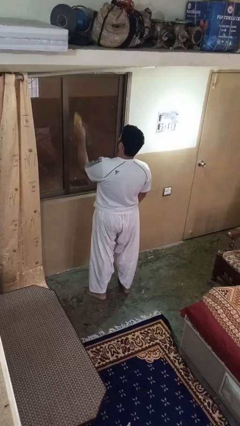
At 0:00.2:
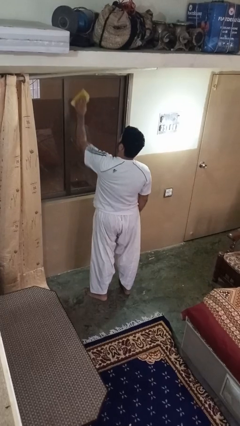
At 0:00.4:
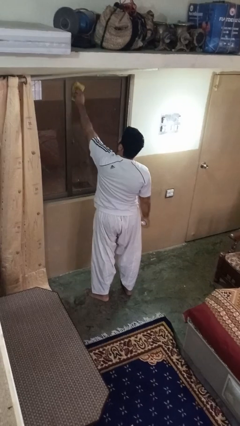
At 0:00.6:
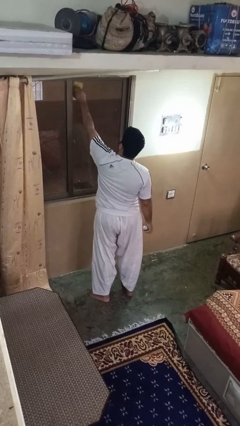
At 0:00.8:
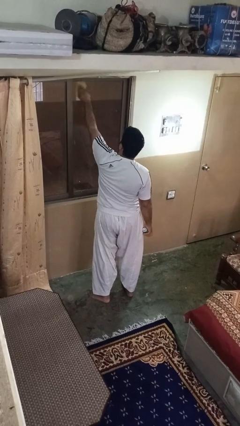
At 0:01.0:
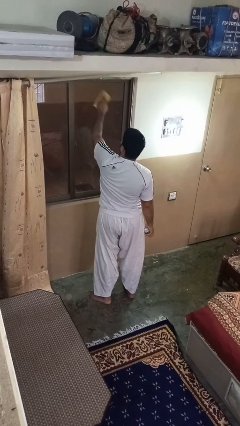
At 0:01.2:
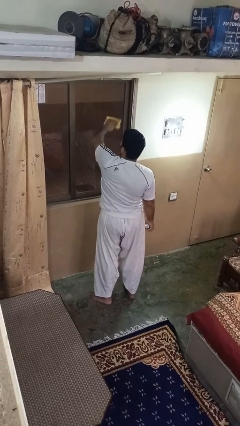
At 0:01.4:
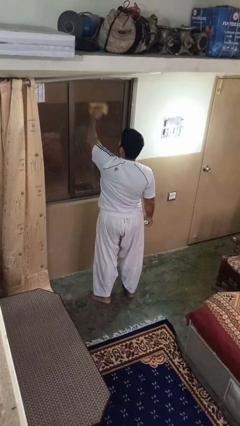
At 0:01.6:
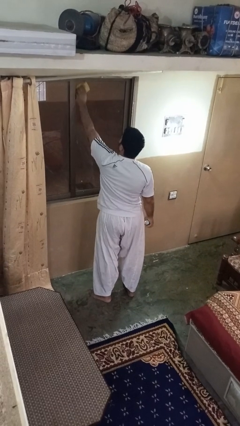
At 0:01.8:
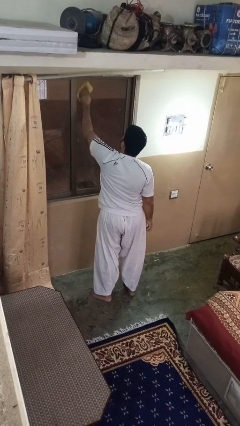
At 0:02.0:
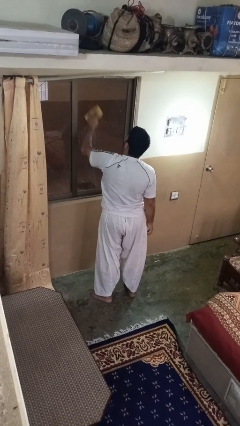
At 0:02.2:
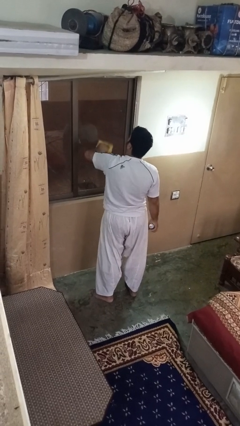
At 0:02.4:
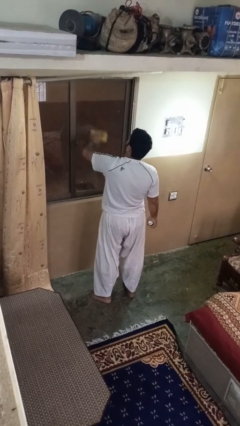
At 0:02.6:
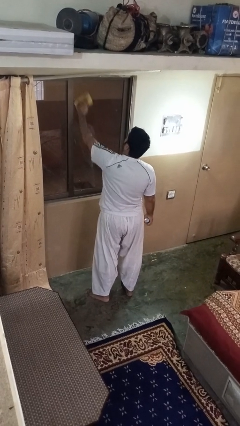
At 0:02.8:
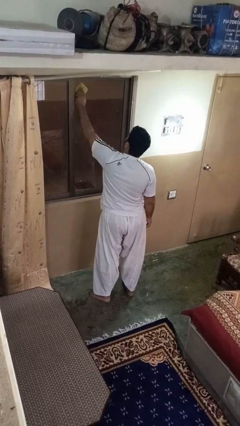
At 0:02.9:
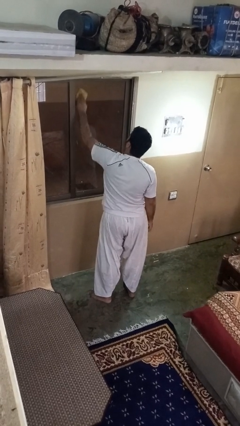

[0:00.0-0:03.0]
person washes window

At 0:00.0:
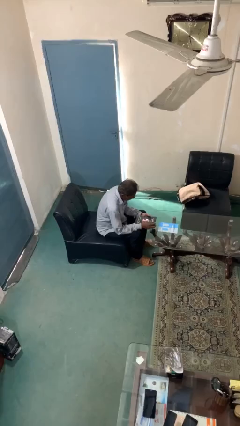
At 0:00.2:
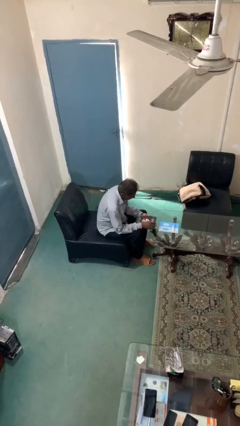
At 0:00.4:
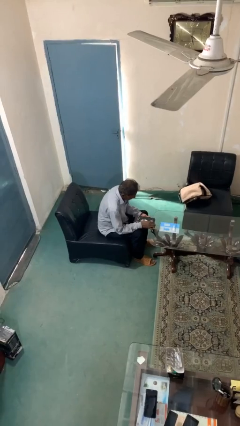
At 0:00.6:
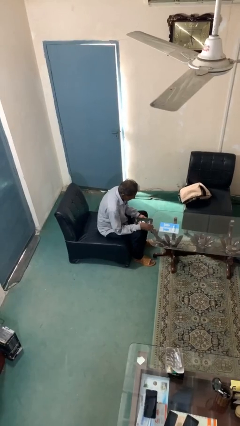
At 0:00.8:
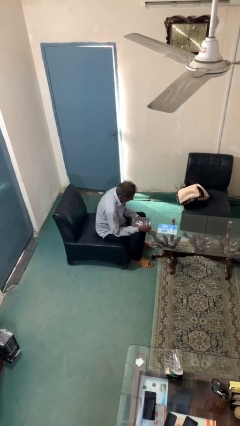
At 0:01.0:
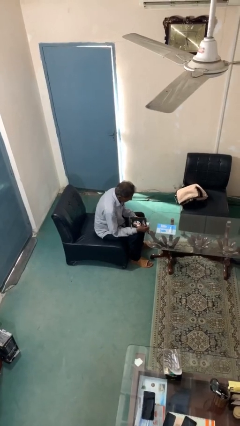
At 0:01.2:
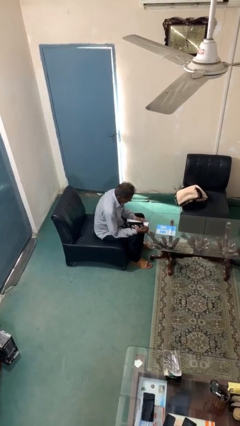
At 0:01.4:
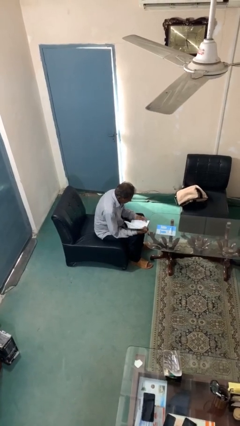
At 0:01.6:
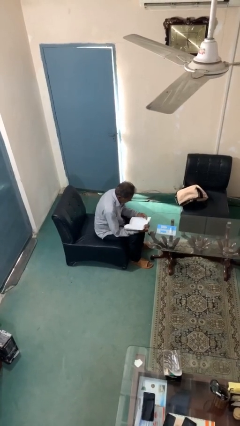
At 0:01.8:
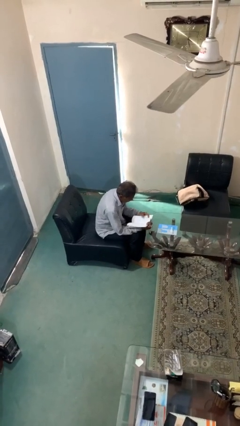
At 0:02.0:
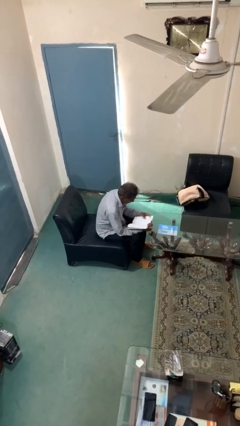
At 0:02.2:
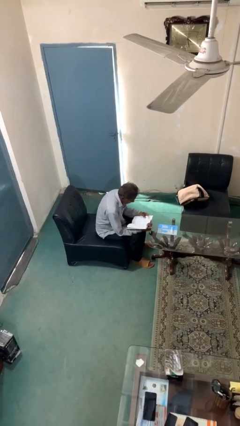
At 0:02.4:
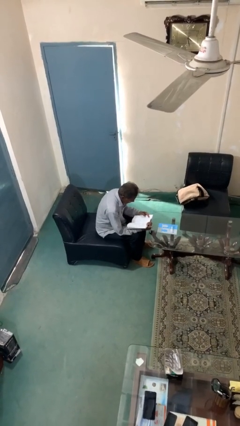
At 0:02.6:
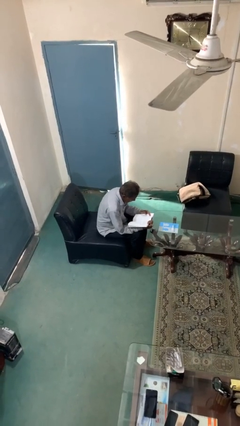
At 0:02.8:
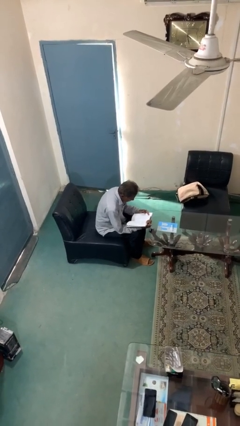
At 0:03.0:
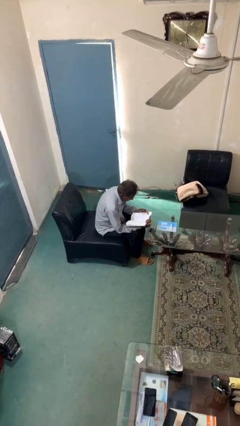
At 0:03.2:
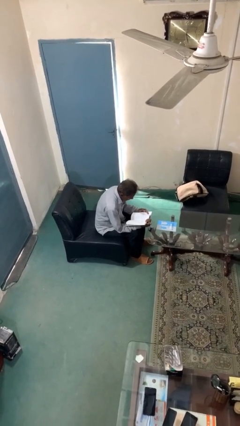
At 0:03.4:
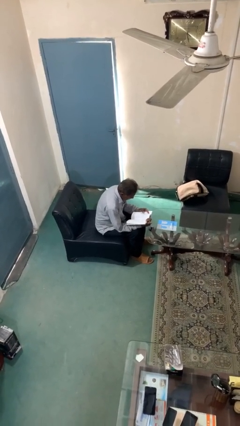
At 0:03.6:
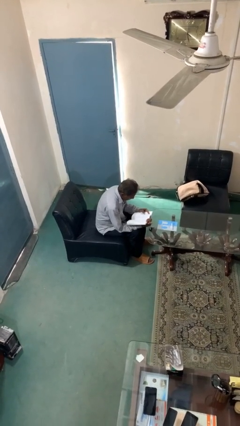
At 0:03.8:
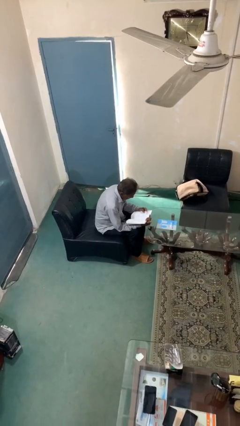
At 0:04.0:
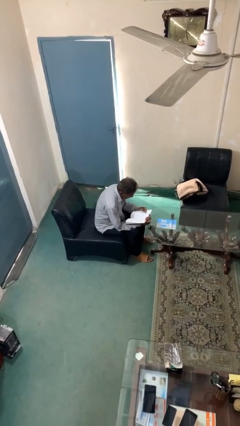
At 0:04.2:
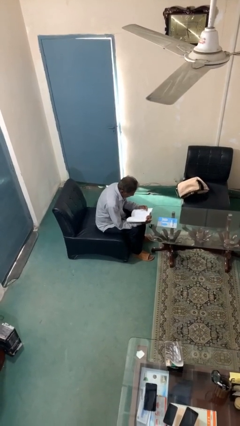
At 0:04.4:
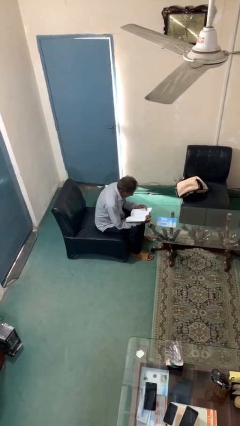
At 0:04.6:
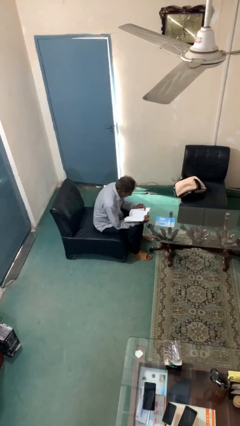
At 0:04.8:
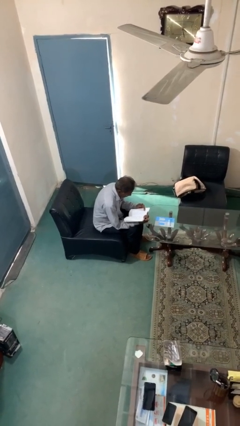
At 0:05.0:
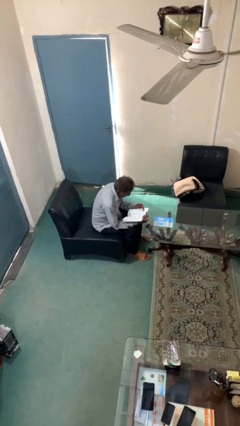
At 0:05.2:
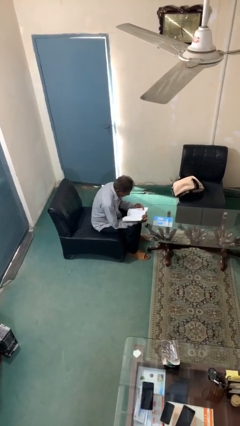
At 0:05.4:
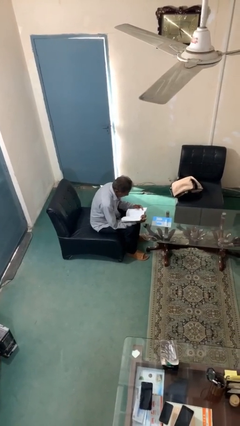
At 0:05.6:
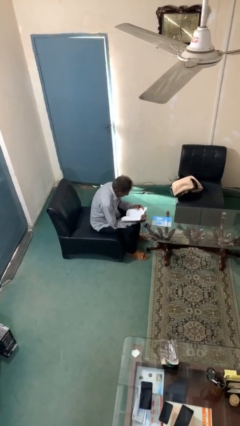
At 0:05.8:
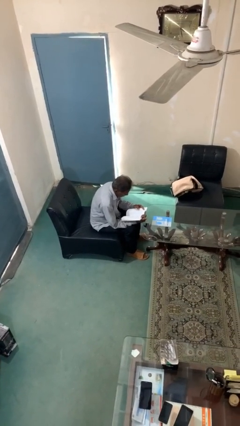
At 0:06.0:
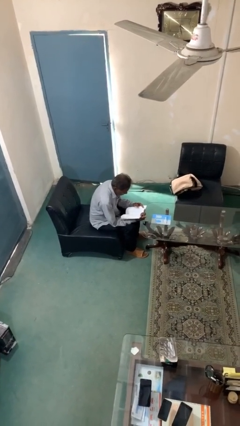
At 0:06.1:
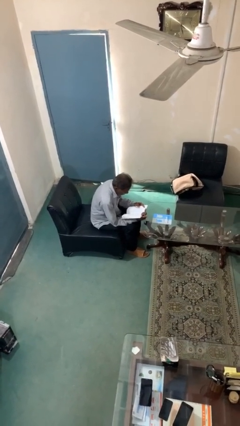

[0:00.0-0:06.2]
person reads document

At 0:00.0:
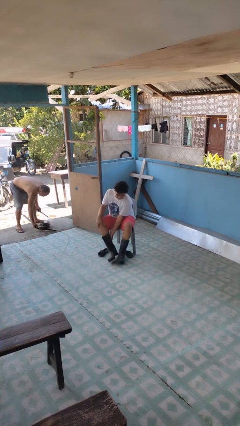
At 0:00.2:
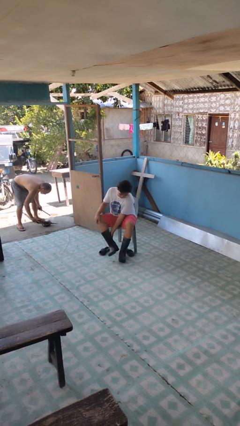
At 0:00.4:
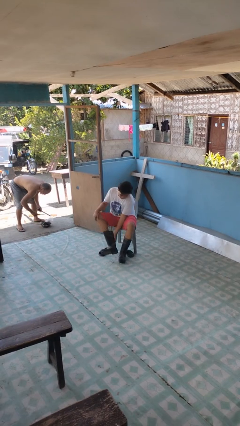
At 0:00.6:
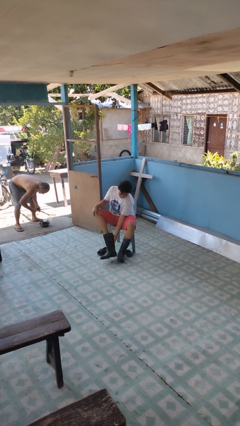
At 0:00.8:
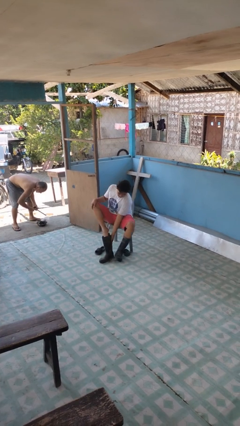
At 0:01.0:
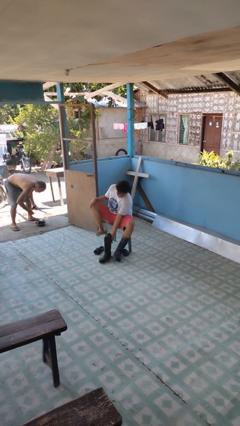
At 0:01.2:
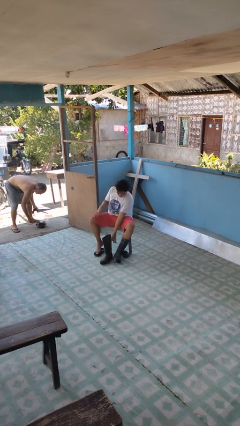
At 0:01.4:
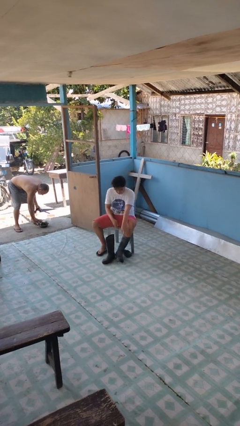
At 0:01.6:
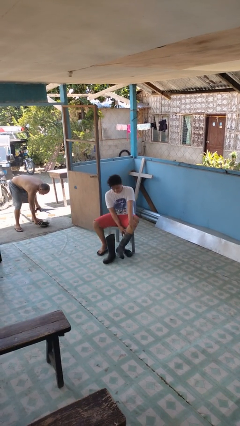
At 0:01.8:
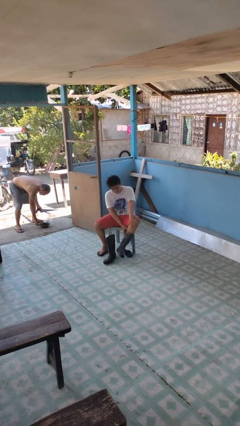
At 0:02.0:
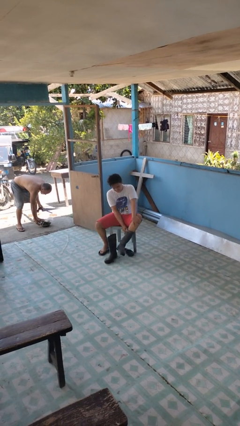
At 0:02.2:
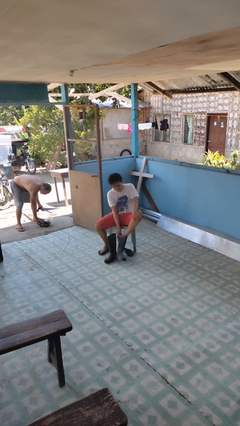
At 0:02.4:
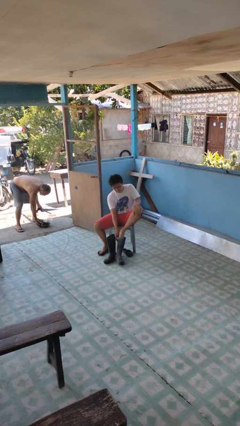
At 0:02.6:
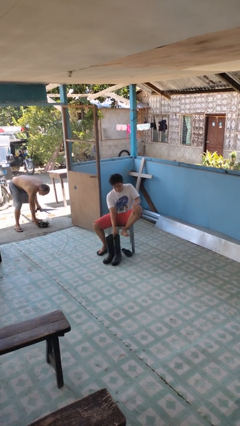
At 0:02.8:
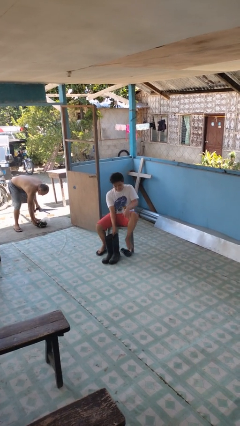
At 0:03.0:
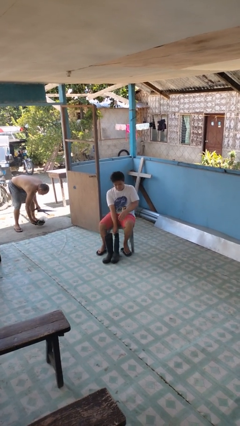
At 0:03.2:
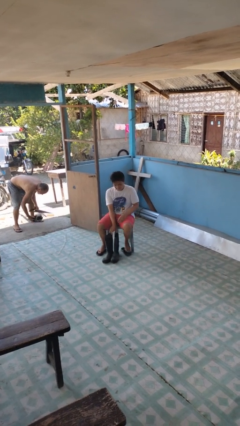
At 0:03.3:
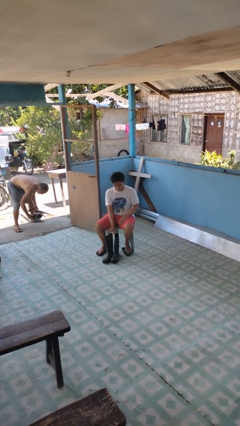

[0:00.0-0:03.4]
person takes off boots

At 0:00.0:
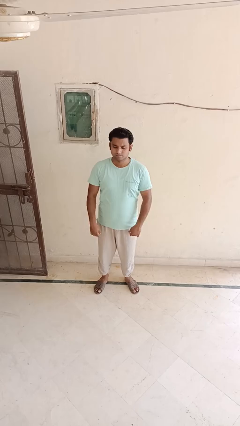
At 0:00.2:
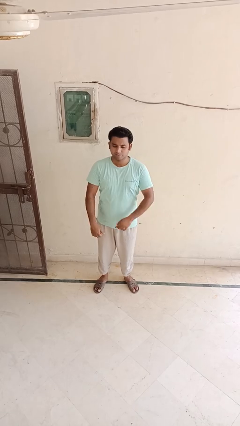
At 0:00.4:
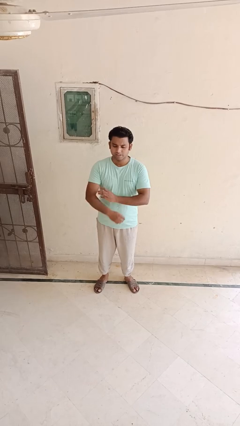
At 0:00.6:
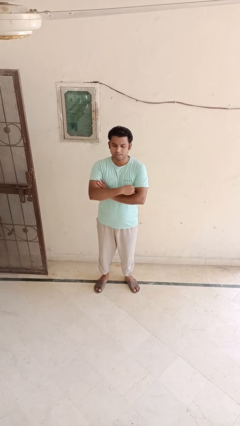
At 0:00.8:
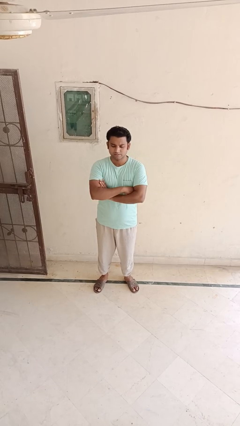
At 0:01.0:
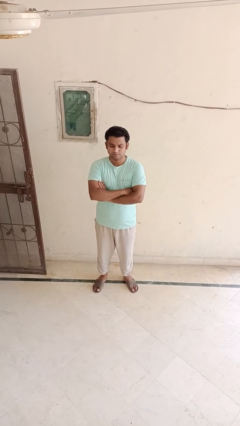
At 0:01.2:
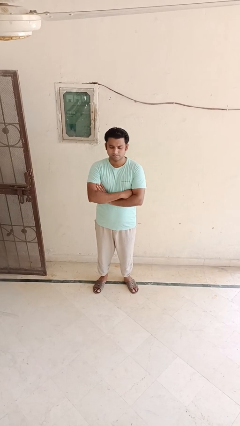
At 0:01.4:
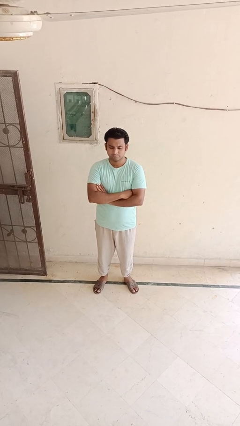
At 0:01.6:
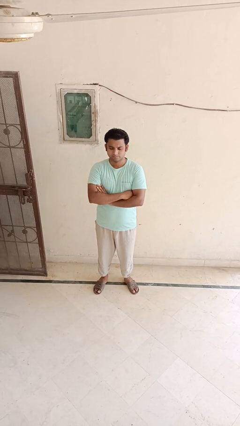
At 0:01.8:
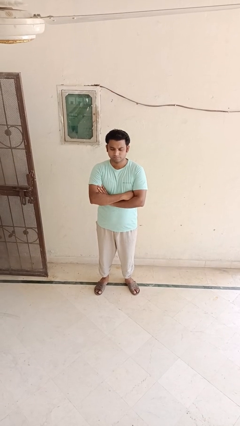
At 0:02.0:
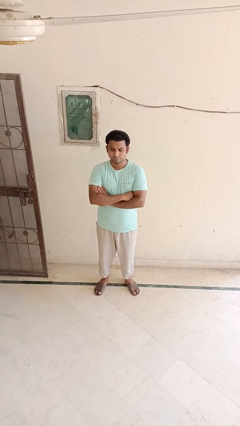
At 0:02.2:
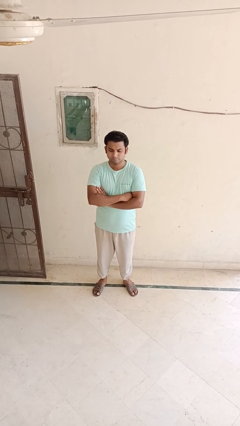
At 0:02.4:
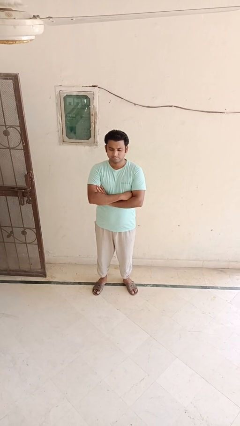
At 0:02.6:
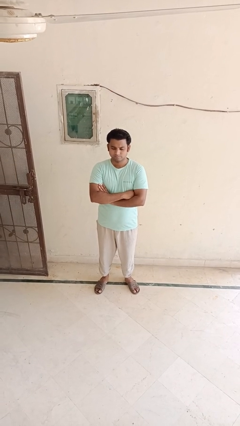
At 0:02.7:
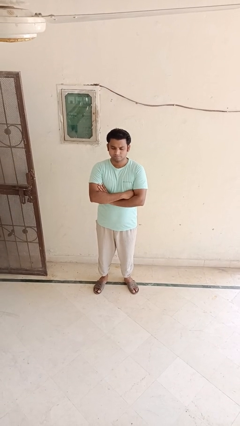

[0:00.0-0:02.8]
person crosses arms

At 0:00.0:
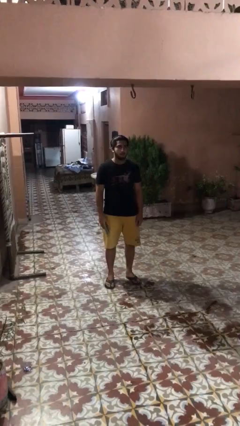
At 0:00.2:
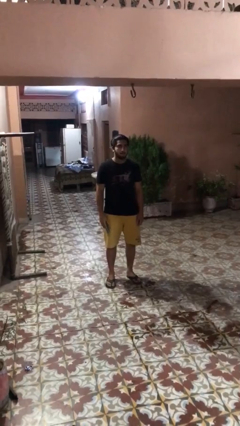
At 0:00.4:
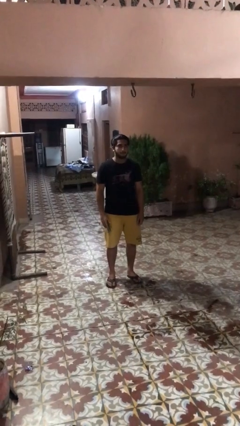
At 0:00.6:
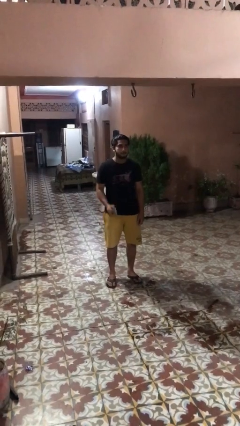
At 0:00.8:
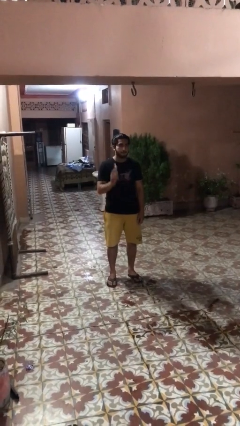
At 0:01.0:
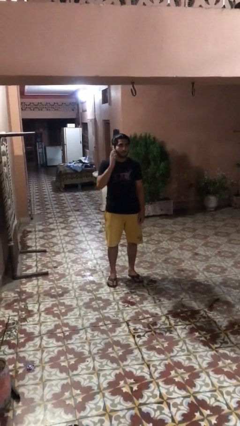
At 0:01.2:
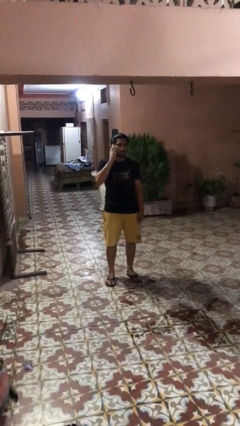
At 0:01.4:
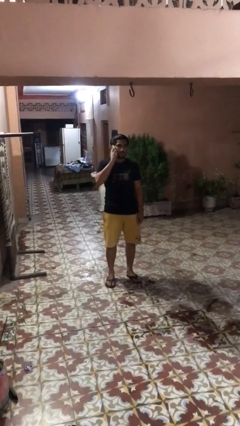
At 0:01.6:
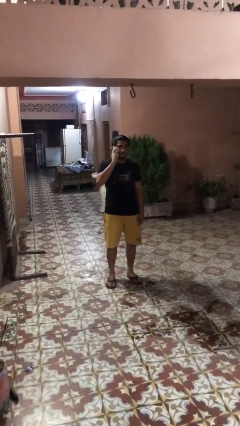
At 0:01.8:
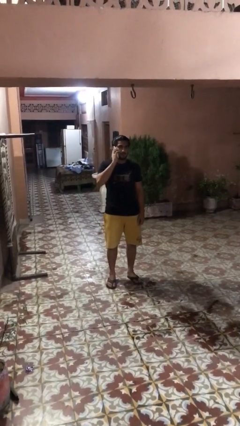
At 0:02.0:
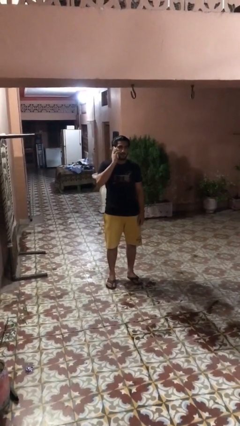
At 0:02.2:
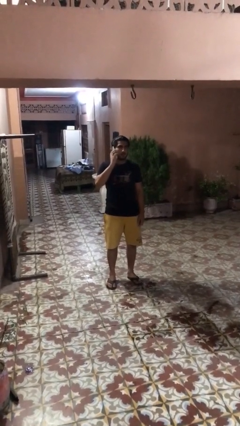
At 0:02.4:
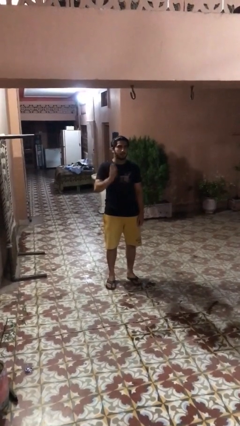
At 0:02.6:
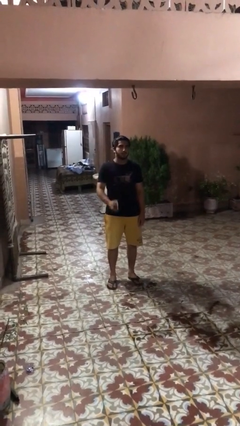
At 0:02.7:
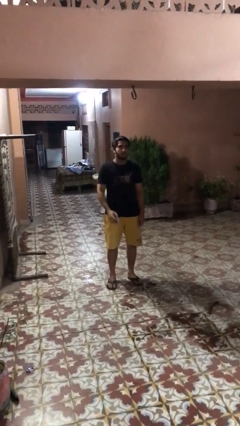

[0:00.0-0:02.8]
person gestures call me
